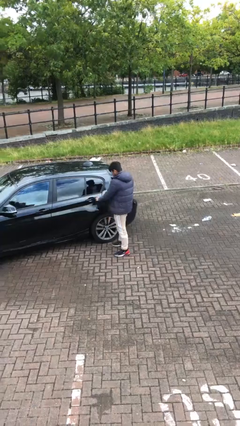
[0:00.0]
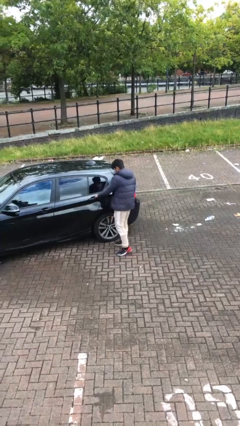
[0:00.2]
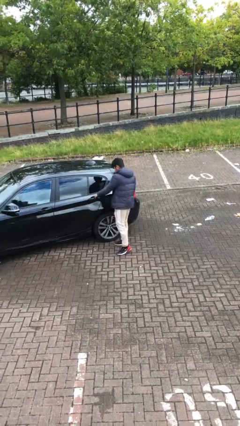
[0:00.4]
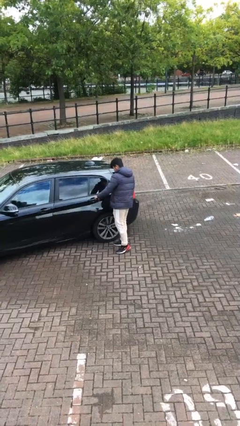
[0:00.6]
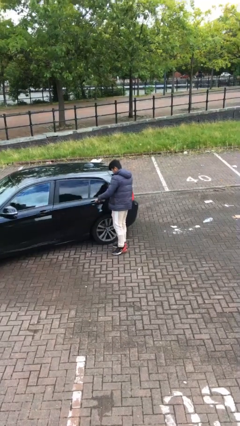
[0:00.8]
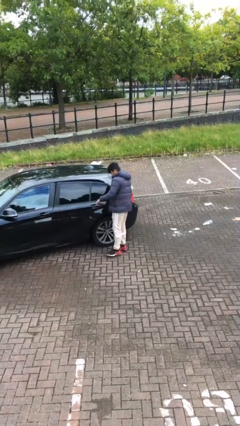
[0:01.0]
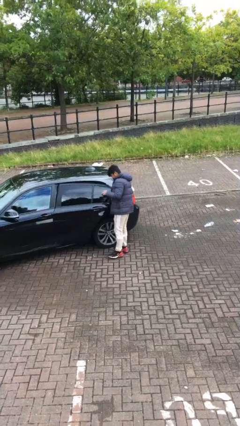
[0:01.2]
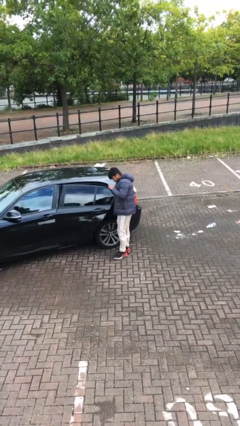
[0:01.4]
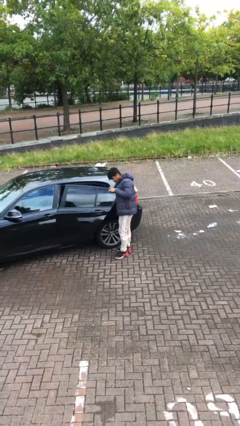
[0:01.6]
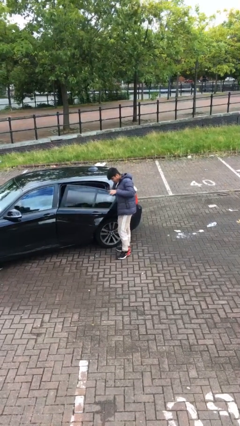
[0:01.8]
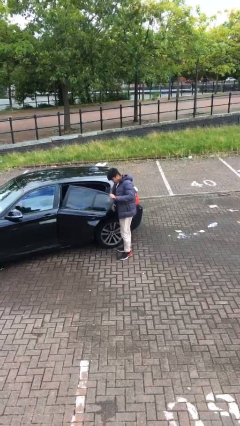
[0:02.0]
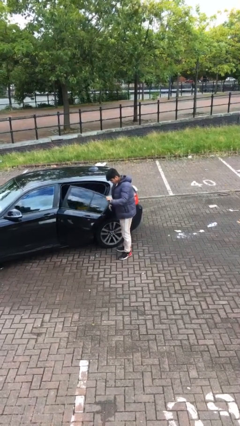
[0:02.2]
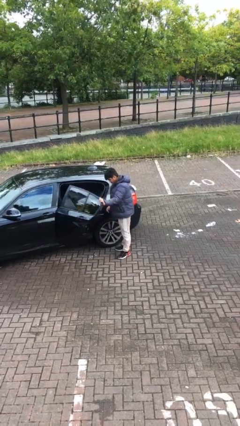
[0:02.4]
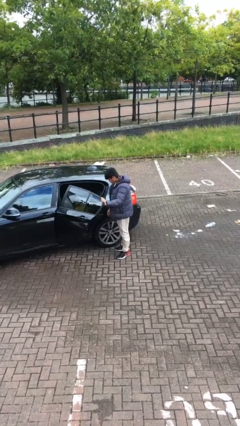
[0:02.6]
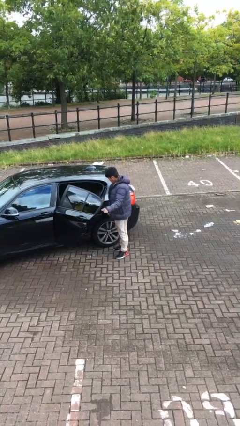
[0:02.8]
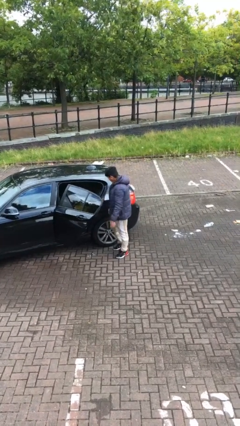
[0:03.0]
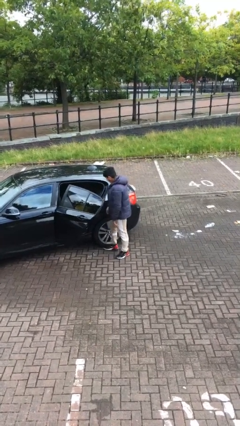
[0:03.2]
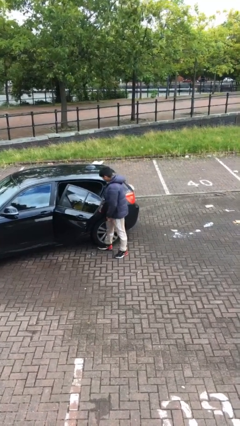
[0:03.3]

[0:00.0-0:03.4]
person opens car door

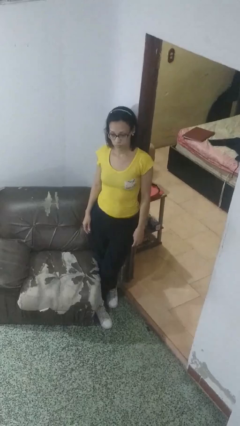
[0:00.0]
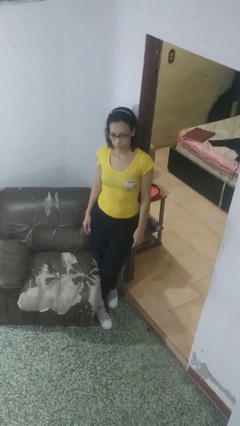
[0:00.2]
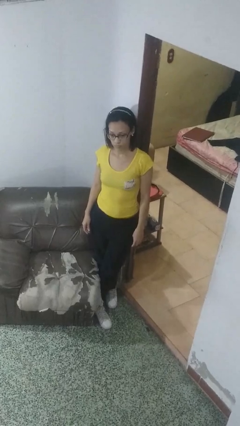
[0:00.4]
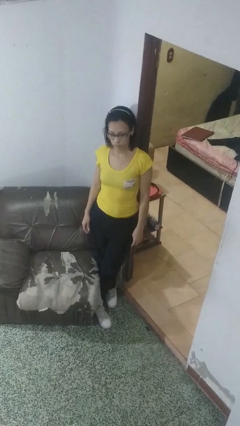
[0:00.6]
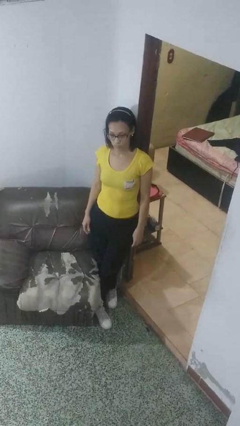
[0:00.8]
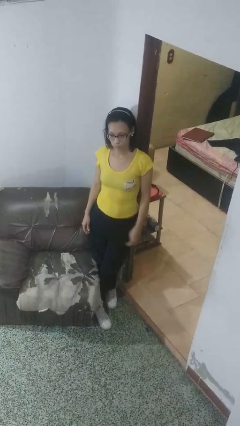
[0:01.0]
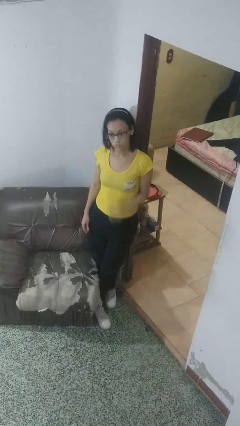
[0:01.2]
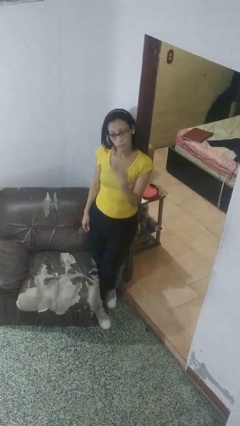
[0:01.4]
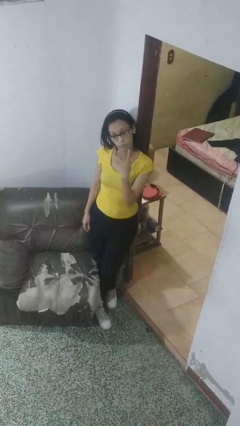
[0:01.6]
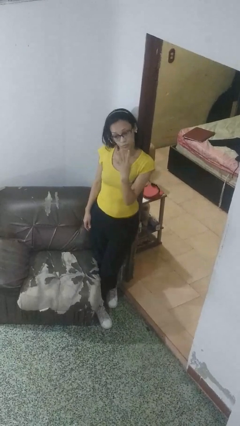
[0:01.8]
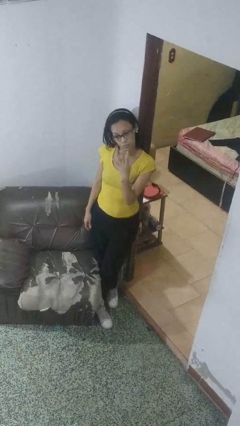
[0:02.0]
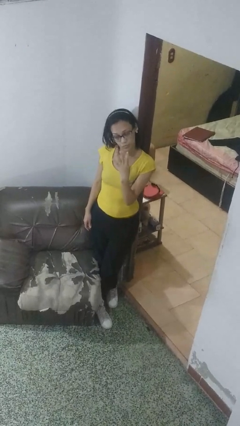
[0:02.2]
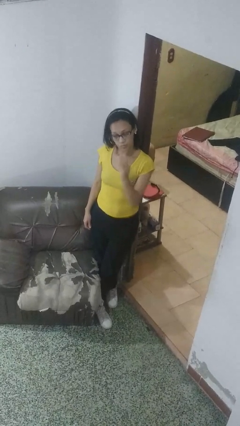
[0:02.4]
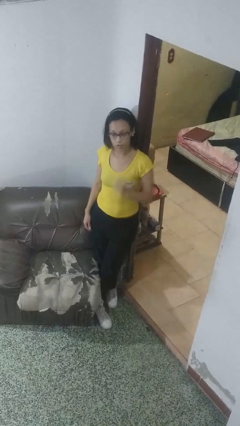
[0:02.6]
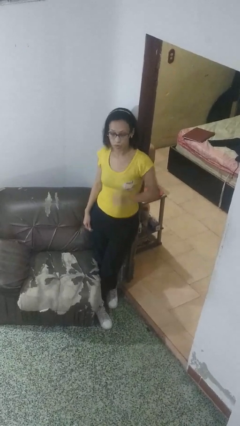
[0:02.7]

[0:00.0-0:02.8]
person gestures number four

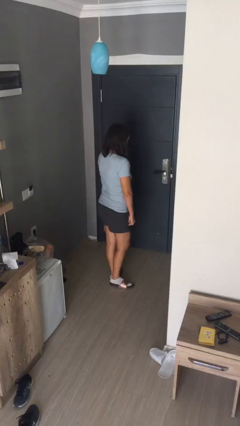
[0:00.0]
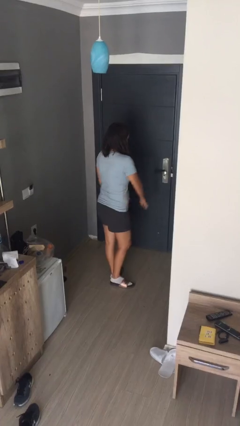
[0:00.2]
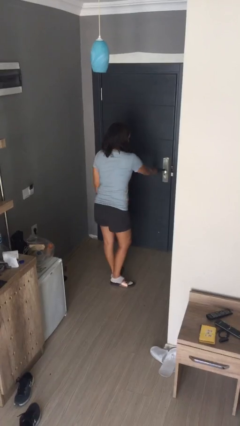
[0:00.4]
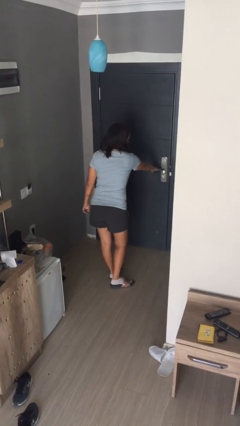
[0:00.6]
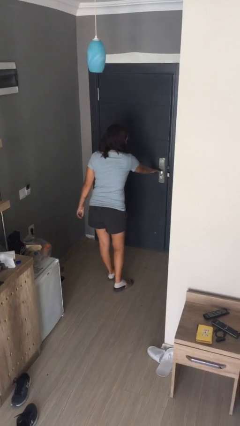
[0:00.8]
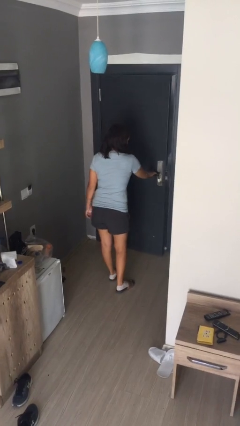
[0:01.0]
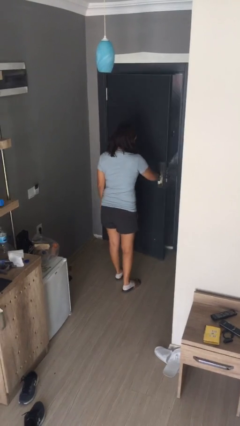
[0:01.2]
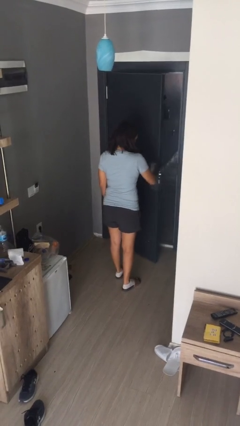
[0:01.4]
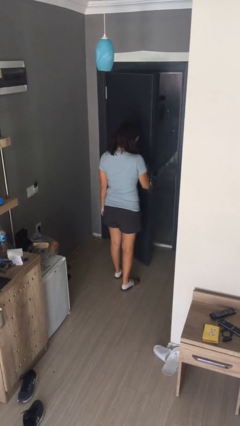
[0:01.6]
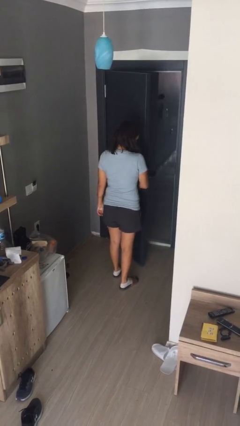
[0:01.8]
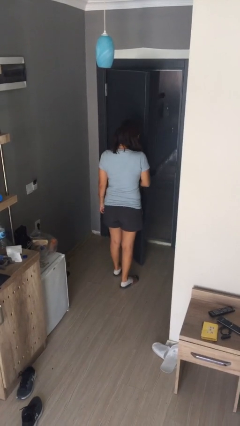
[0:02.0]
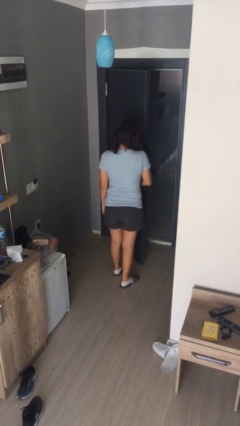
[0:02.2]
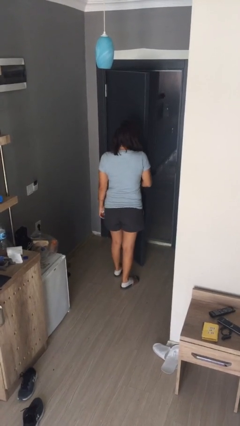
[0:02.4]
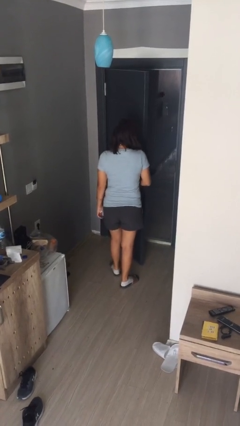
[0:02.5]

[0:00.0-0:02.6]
person opens facility door

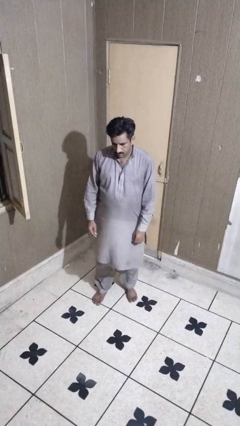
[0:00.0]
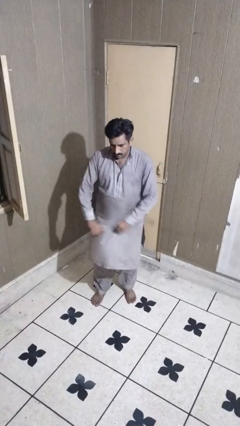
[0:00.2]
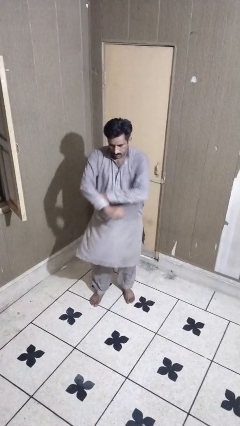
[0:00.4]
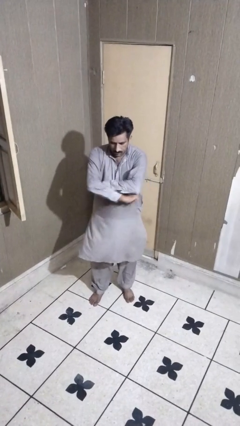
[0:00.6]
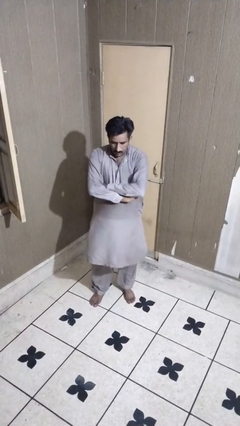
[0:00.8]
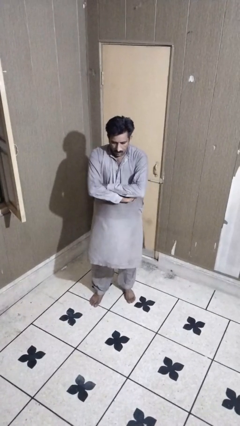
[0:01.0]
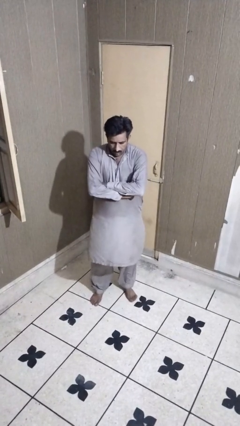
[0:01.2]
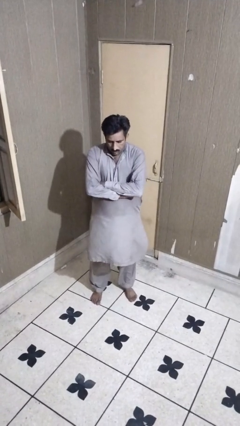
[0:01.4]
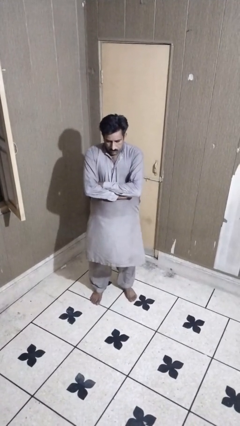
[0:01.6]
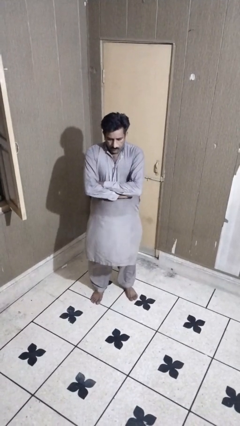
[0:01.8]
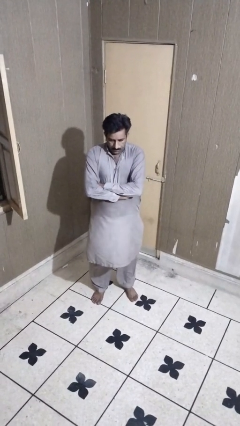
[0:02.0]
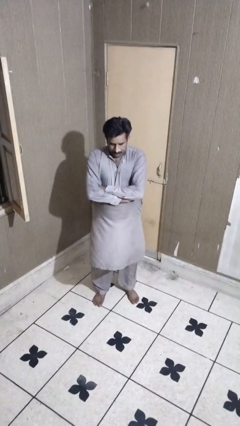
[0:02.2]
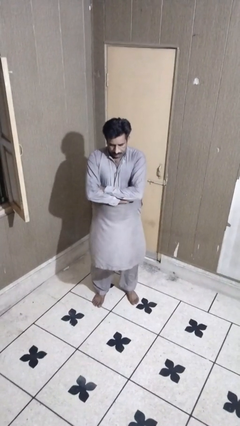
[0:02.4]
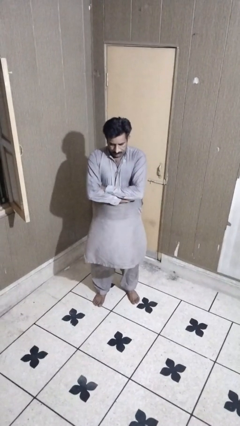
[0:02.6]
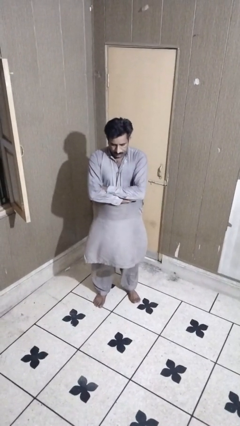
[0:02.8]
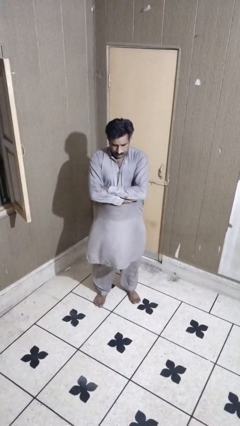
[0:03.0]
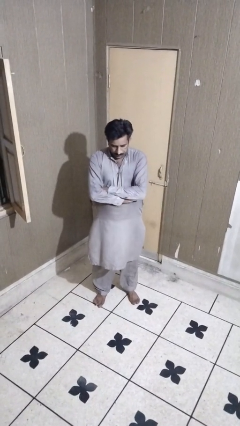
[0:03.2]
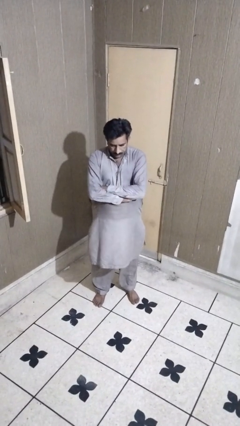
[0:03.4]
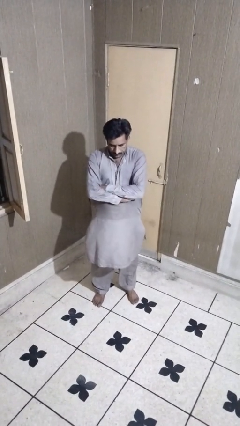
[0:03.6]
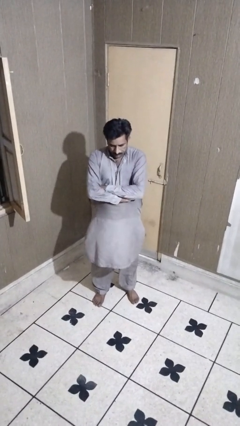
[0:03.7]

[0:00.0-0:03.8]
person crosses arms

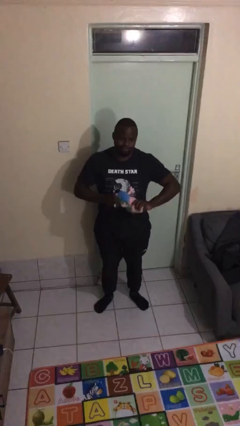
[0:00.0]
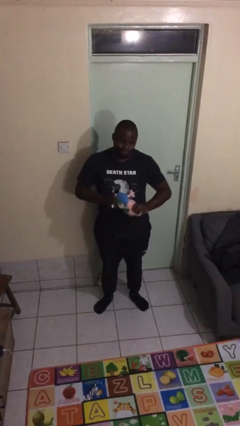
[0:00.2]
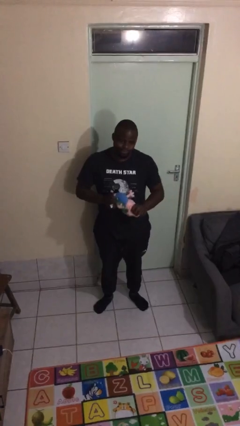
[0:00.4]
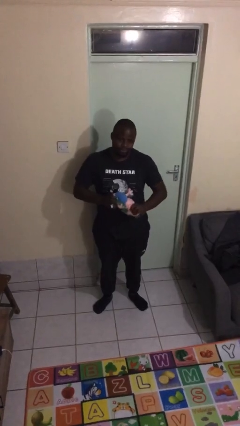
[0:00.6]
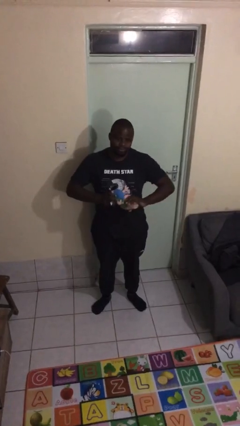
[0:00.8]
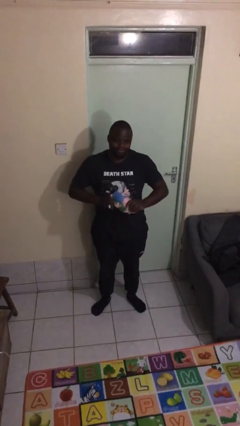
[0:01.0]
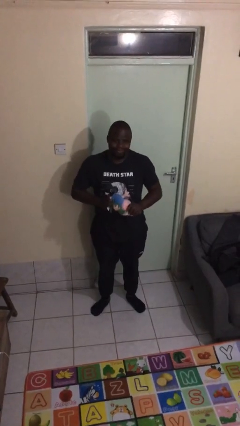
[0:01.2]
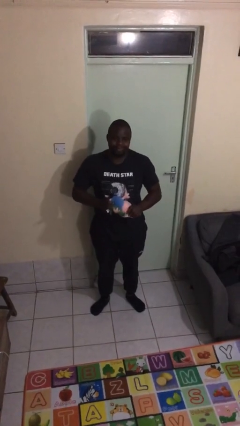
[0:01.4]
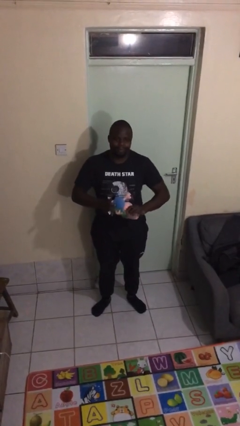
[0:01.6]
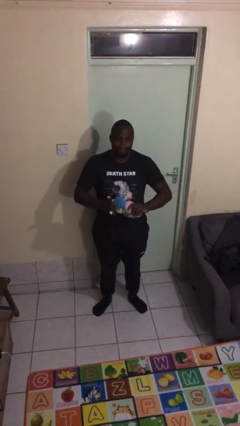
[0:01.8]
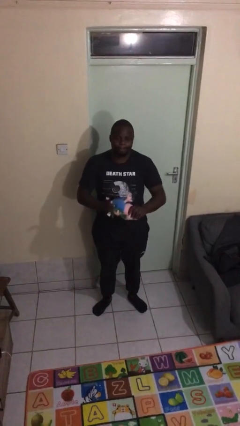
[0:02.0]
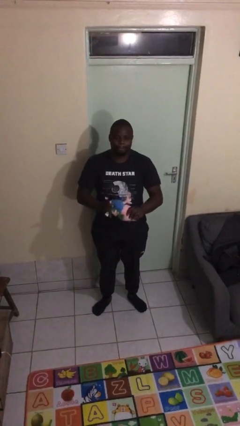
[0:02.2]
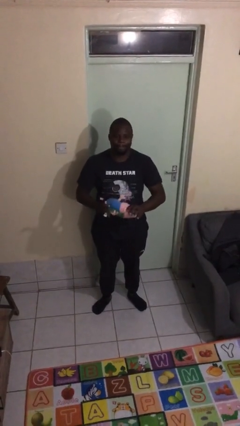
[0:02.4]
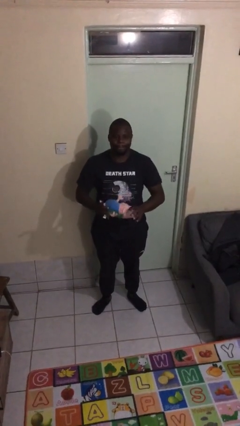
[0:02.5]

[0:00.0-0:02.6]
person squeezes object

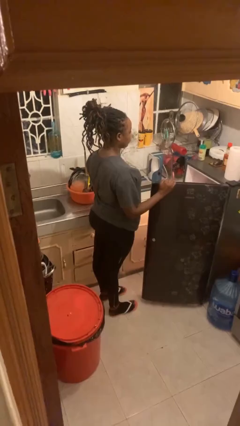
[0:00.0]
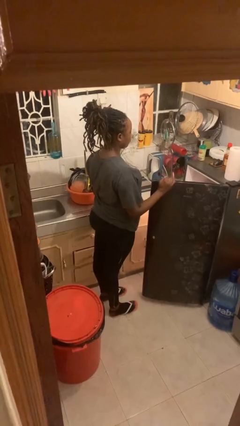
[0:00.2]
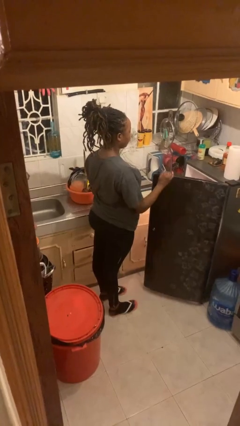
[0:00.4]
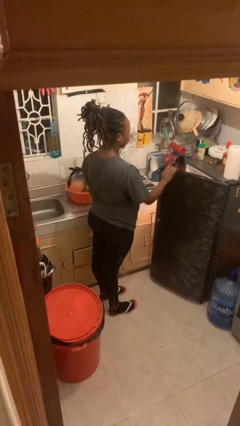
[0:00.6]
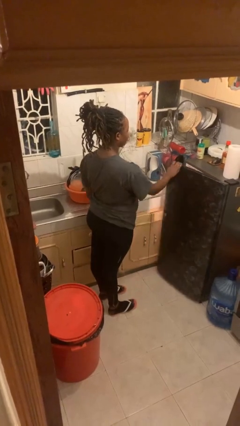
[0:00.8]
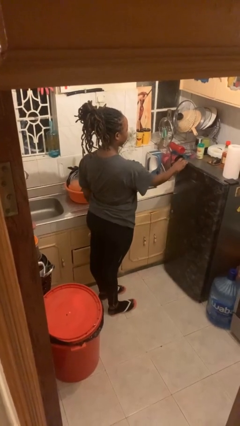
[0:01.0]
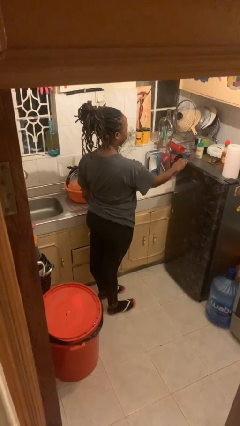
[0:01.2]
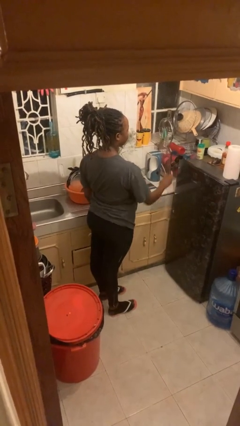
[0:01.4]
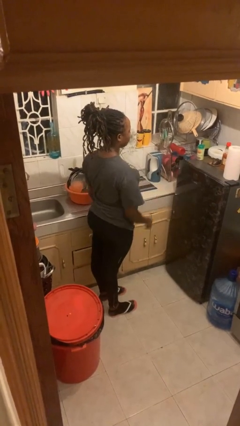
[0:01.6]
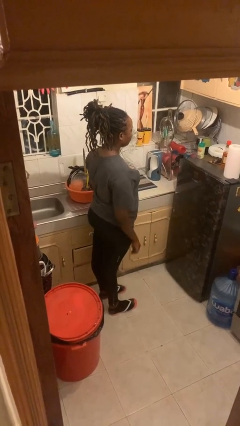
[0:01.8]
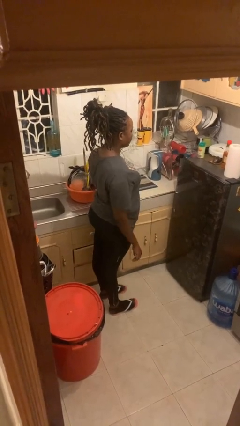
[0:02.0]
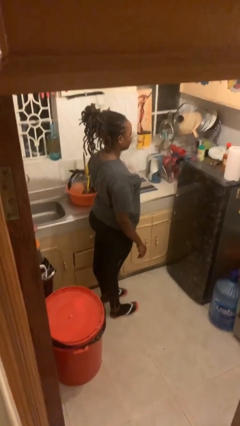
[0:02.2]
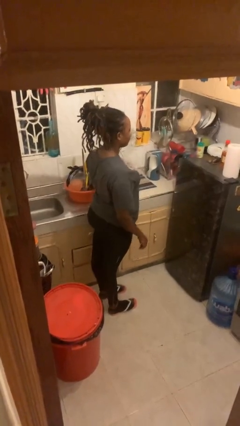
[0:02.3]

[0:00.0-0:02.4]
person closes refrigerator

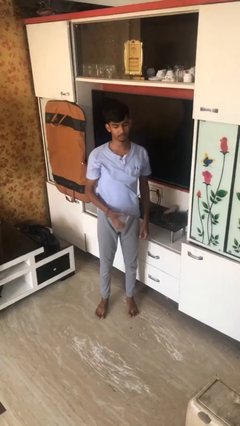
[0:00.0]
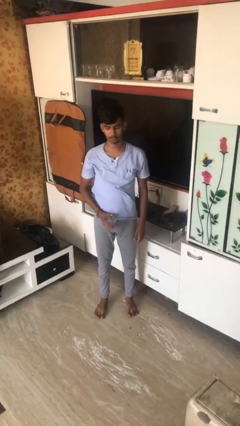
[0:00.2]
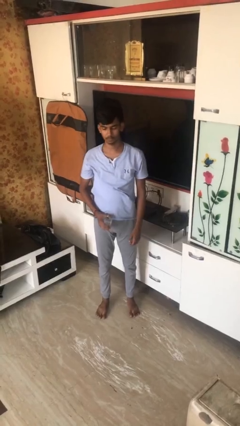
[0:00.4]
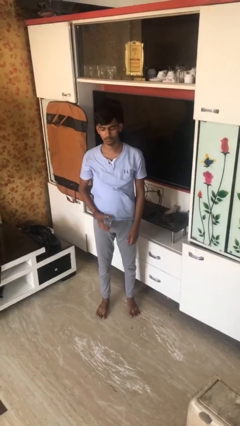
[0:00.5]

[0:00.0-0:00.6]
person takes object from cabinet
